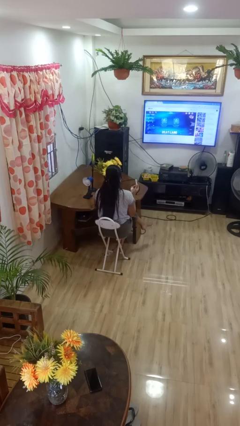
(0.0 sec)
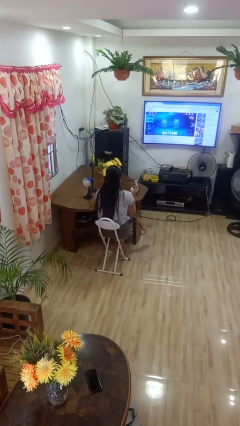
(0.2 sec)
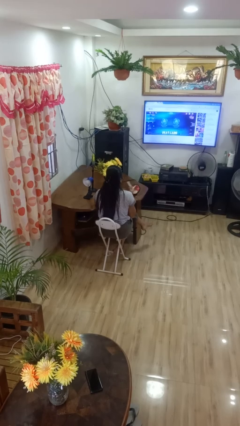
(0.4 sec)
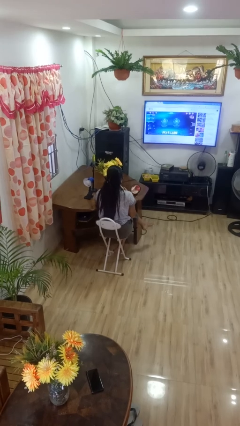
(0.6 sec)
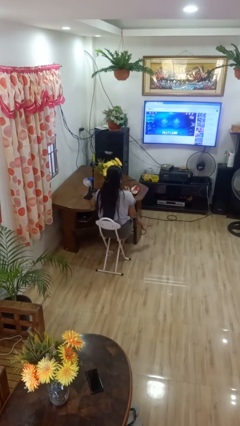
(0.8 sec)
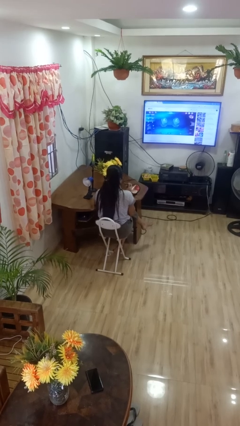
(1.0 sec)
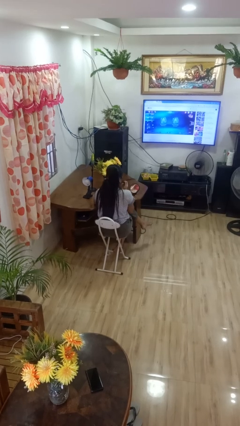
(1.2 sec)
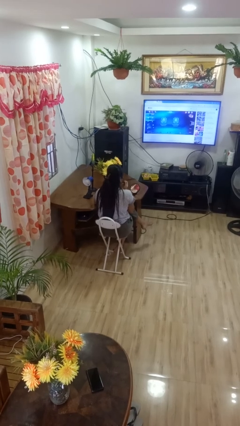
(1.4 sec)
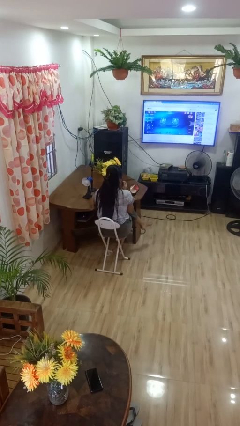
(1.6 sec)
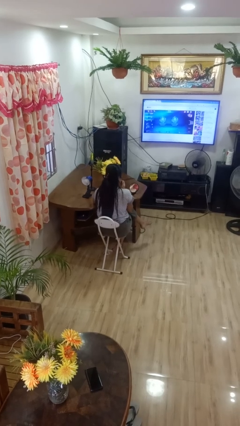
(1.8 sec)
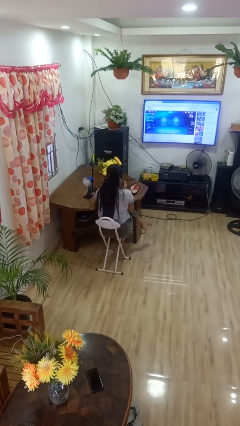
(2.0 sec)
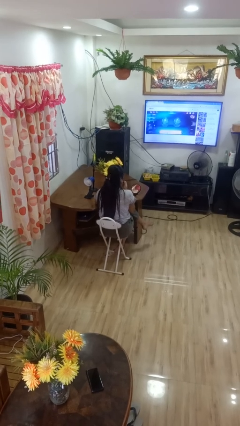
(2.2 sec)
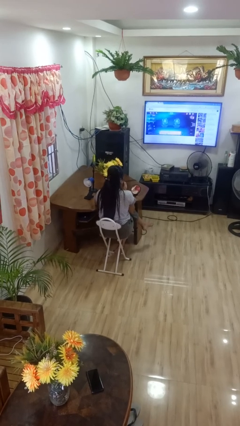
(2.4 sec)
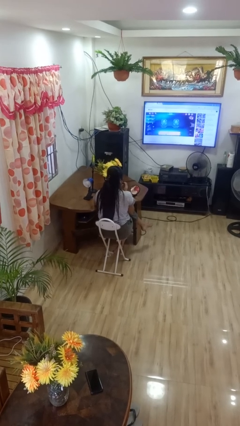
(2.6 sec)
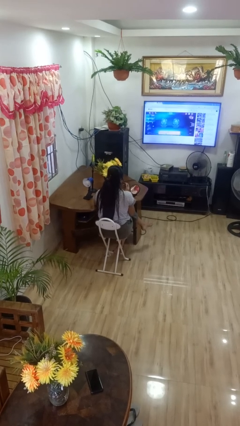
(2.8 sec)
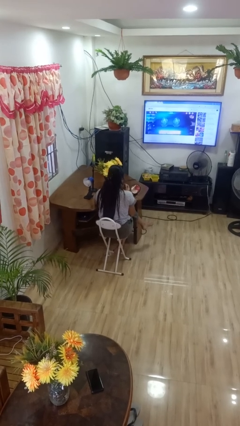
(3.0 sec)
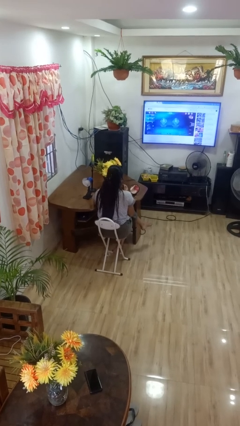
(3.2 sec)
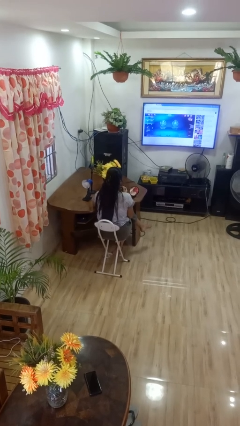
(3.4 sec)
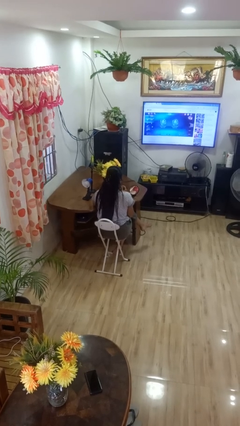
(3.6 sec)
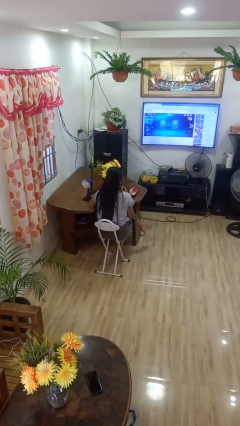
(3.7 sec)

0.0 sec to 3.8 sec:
person applies lip makeup

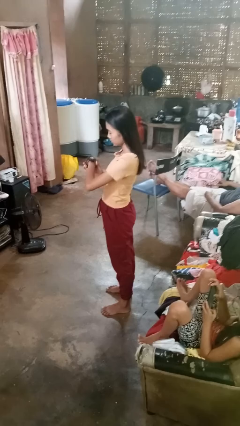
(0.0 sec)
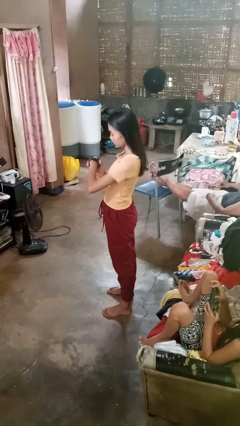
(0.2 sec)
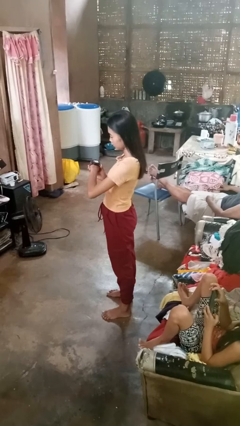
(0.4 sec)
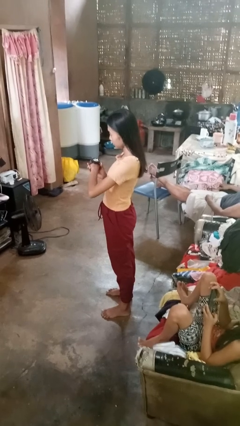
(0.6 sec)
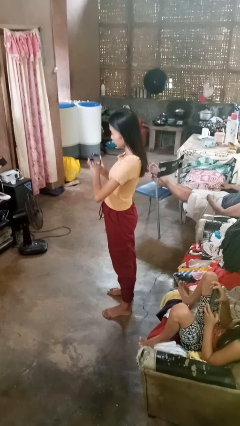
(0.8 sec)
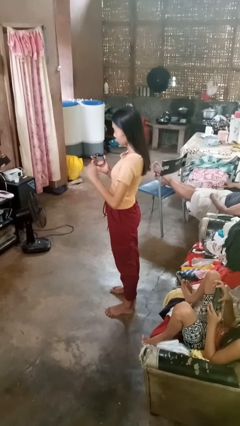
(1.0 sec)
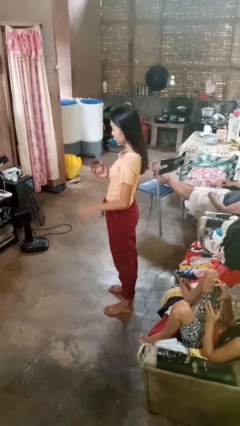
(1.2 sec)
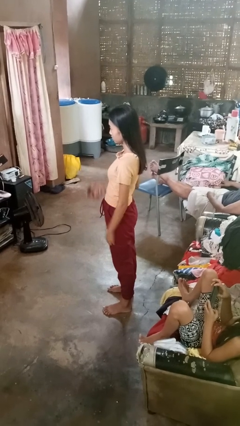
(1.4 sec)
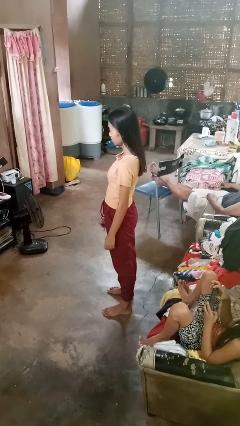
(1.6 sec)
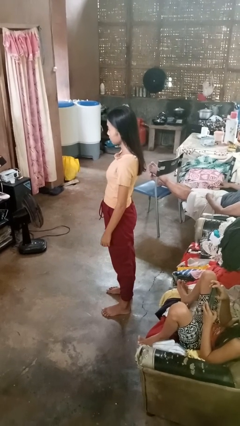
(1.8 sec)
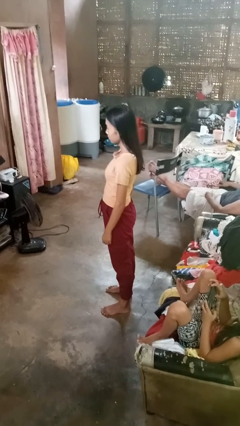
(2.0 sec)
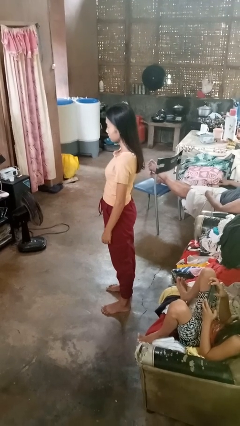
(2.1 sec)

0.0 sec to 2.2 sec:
person takes off wristwatch

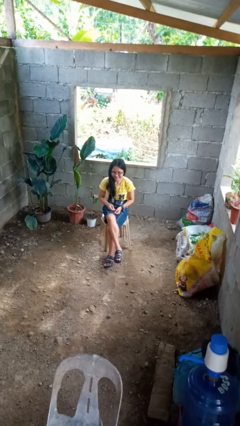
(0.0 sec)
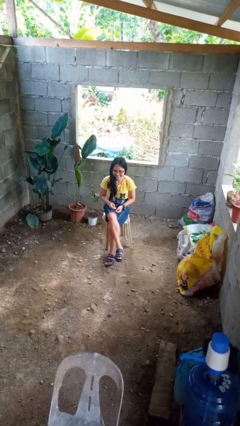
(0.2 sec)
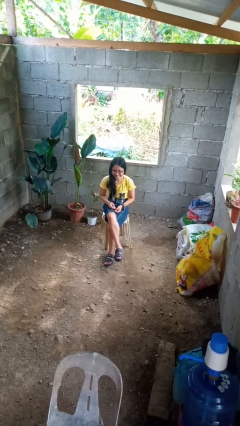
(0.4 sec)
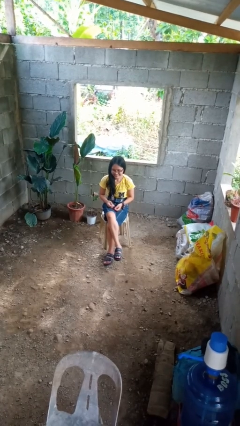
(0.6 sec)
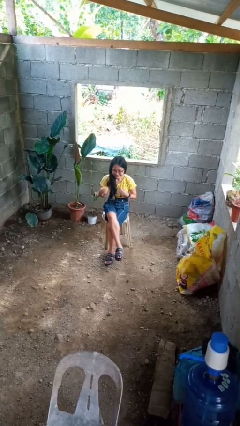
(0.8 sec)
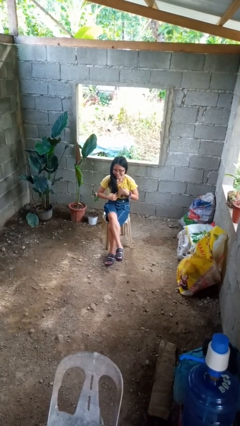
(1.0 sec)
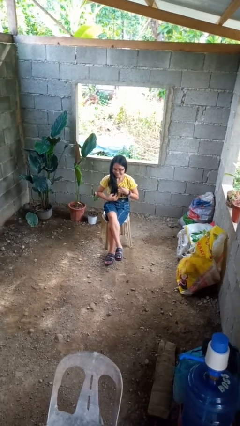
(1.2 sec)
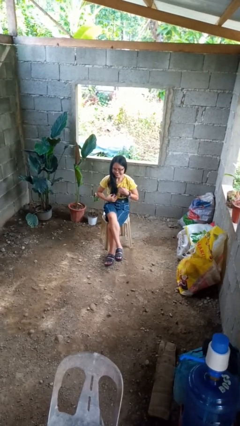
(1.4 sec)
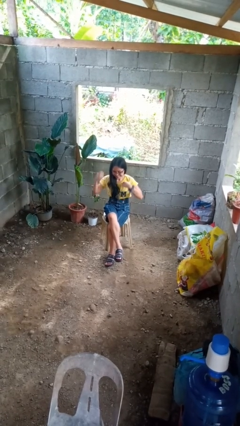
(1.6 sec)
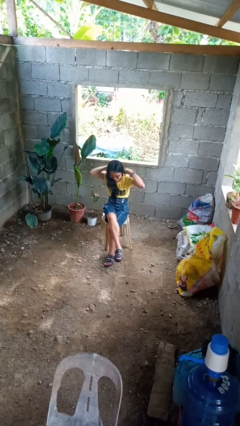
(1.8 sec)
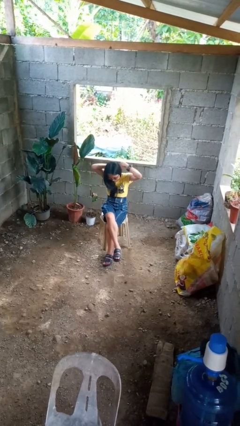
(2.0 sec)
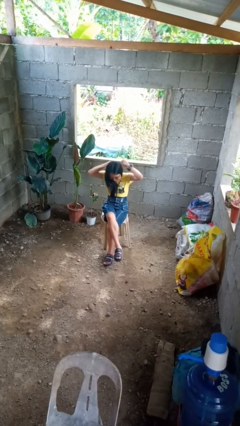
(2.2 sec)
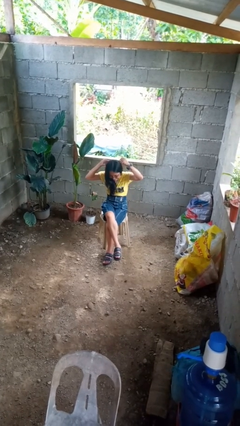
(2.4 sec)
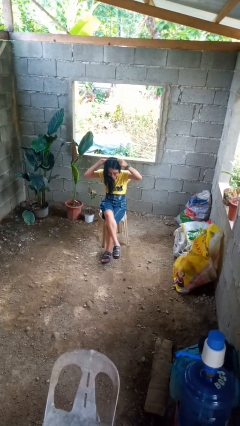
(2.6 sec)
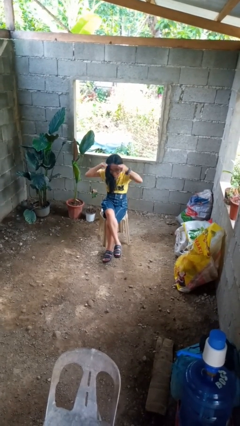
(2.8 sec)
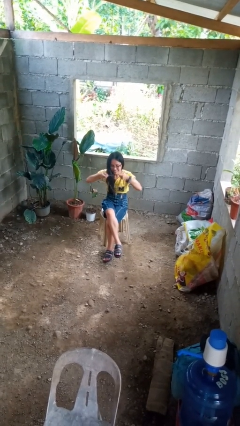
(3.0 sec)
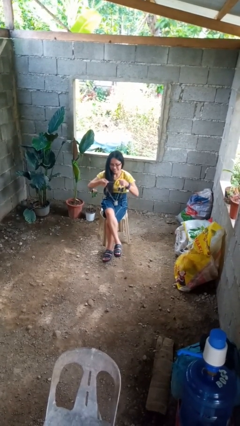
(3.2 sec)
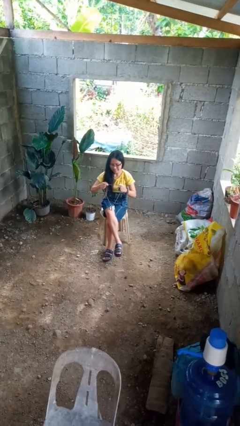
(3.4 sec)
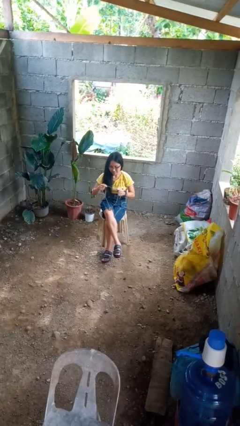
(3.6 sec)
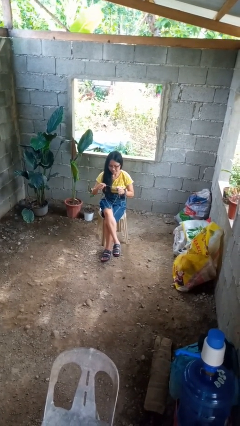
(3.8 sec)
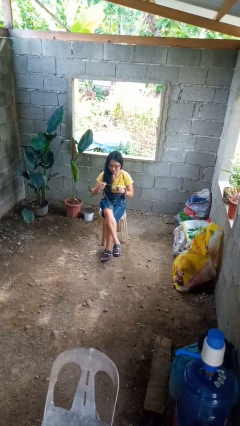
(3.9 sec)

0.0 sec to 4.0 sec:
person takes off necklace

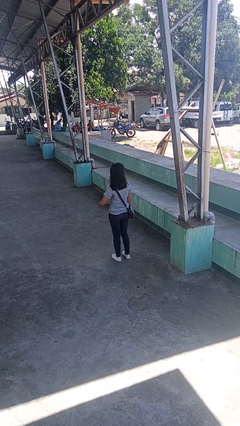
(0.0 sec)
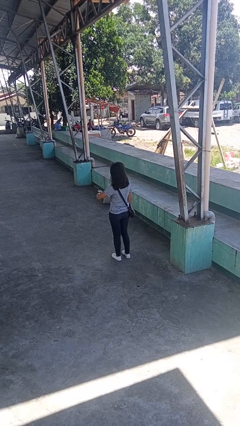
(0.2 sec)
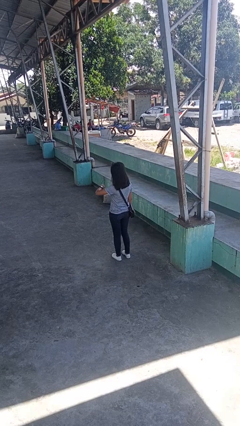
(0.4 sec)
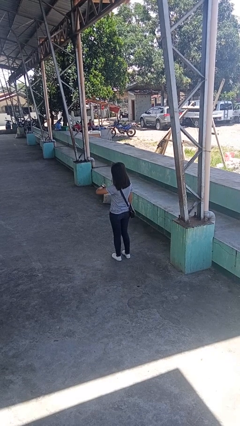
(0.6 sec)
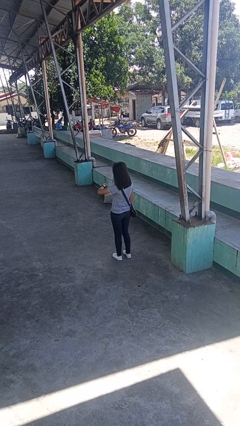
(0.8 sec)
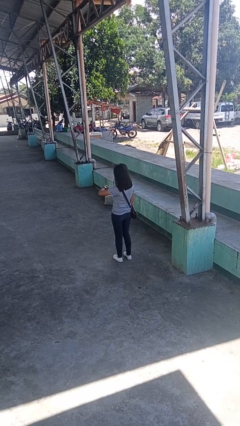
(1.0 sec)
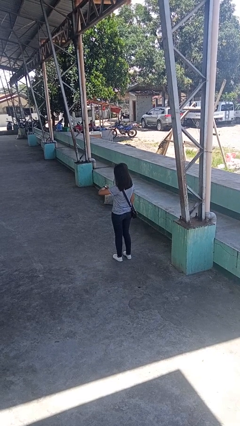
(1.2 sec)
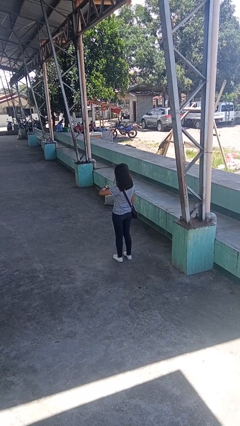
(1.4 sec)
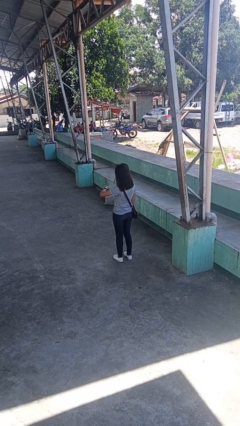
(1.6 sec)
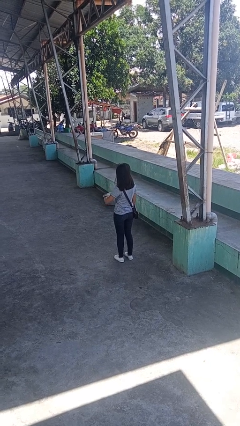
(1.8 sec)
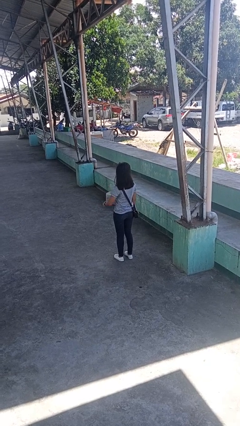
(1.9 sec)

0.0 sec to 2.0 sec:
person looks at wristwatch

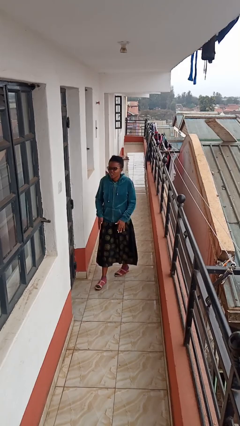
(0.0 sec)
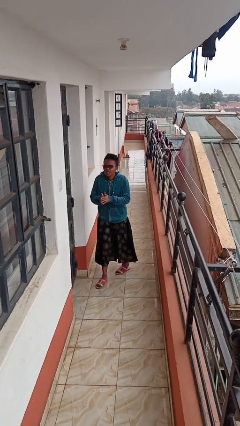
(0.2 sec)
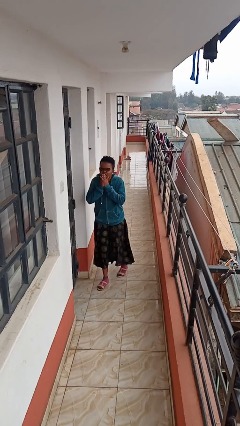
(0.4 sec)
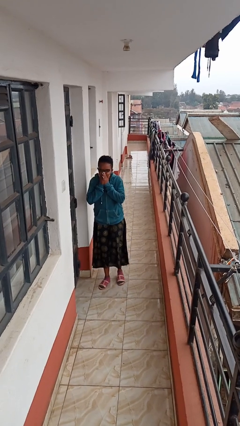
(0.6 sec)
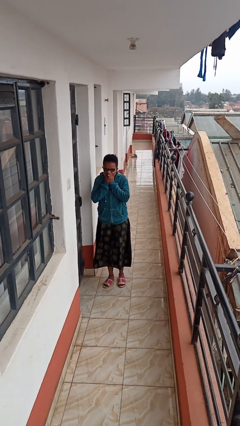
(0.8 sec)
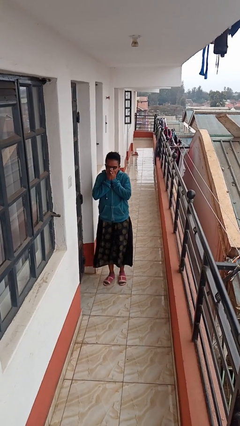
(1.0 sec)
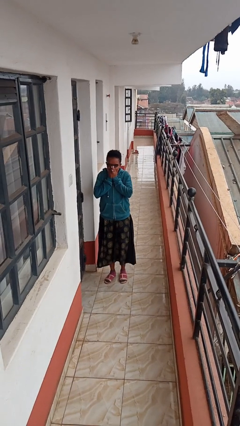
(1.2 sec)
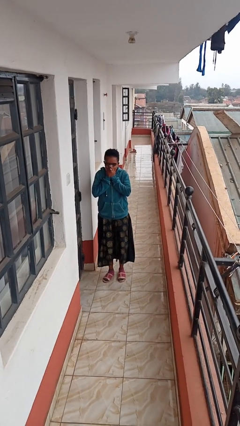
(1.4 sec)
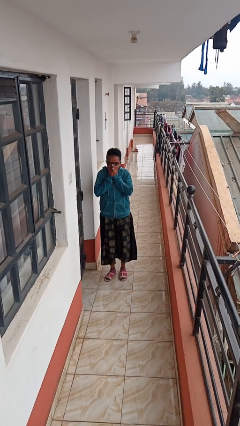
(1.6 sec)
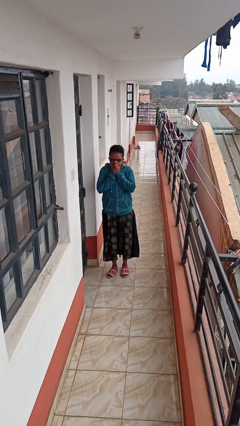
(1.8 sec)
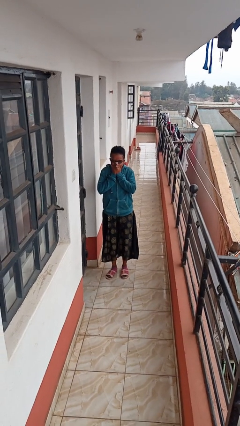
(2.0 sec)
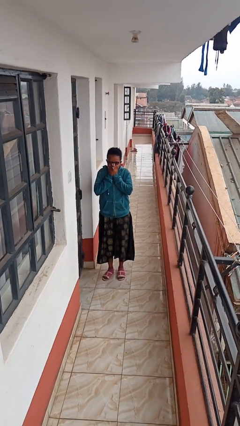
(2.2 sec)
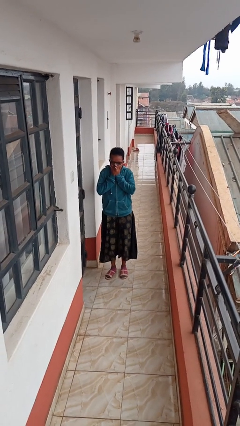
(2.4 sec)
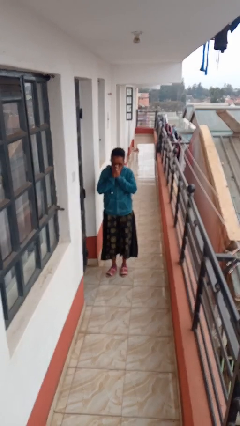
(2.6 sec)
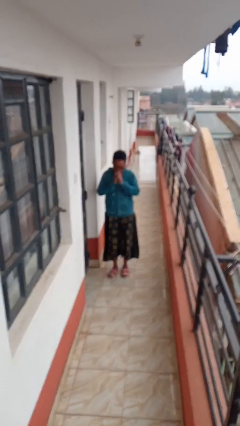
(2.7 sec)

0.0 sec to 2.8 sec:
person blows into hands

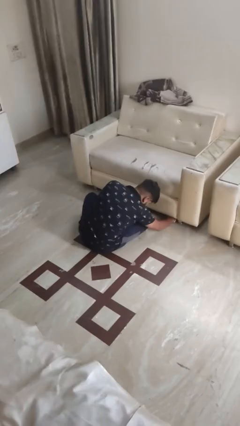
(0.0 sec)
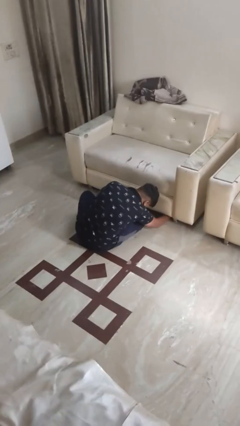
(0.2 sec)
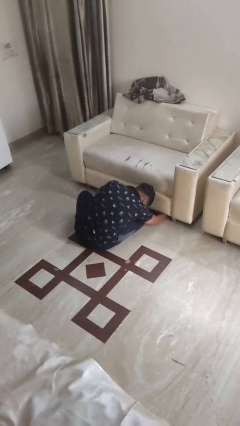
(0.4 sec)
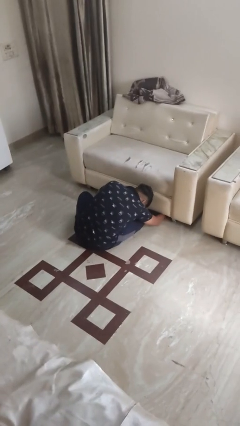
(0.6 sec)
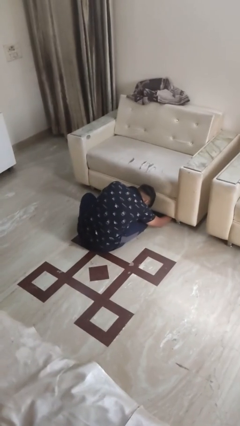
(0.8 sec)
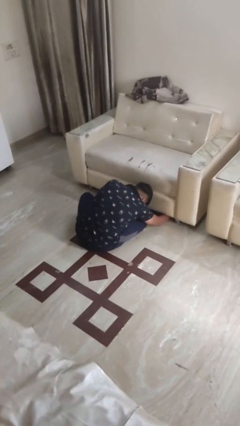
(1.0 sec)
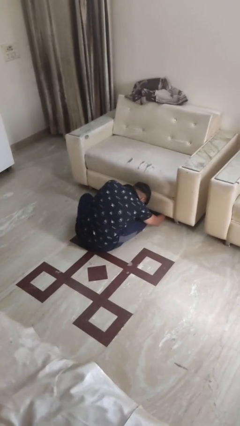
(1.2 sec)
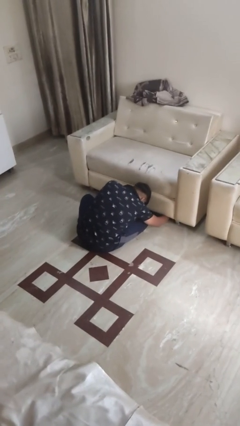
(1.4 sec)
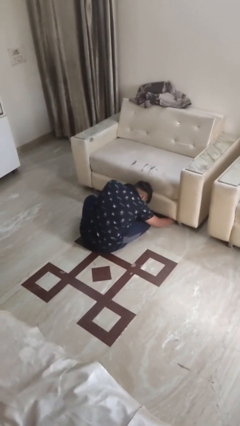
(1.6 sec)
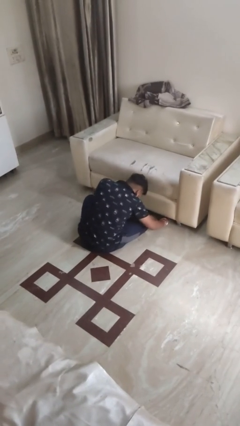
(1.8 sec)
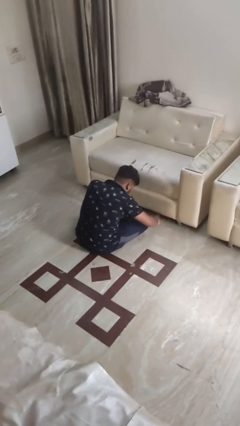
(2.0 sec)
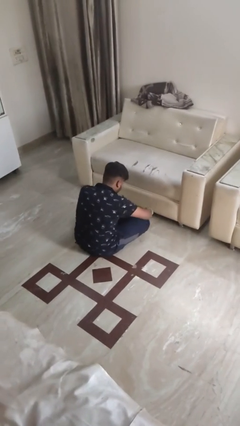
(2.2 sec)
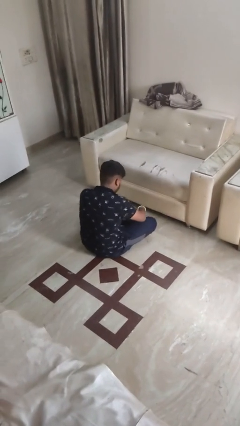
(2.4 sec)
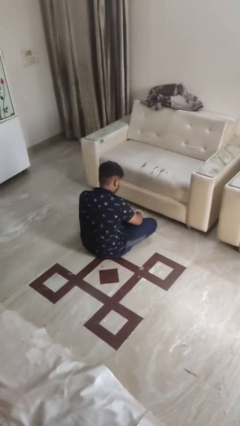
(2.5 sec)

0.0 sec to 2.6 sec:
person searches under couch
